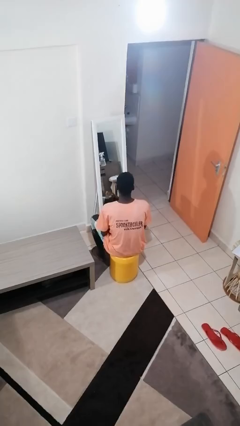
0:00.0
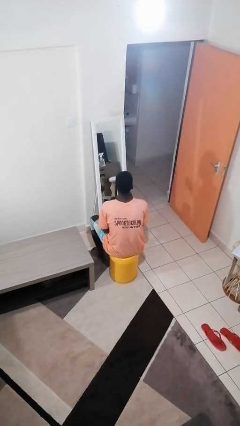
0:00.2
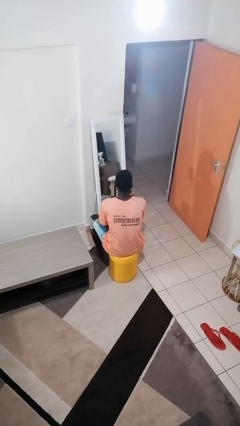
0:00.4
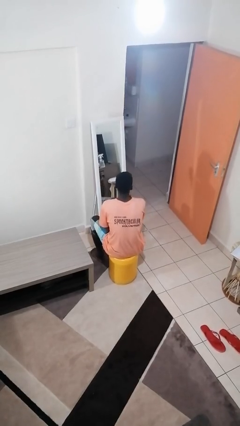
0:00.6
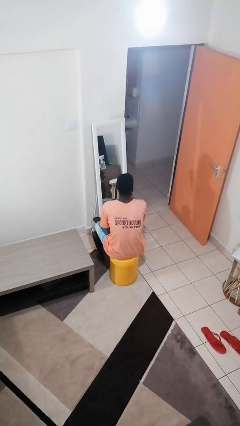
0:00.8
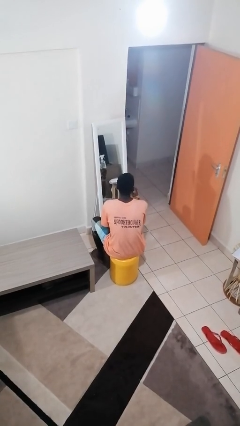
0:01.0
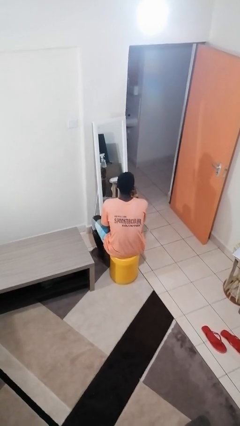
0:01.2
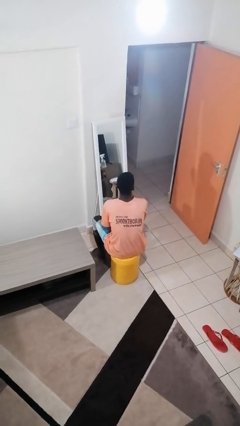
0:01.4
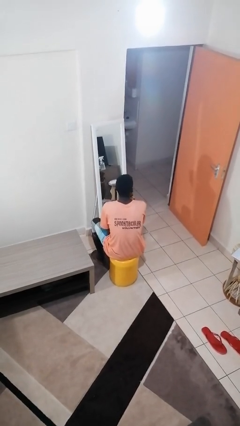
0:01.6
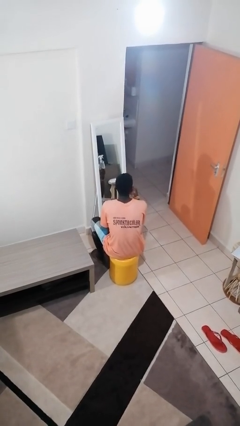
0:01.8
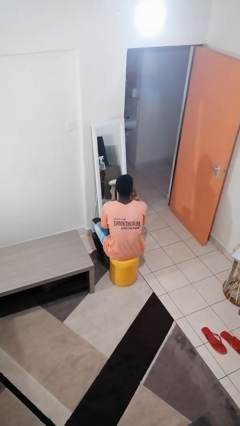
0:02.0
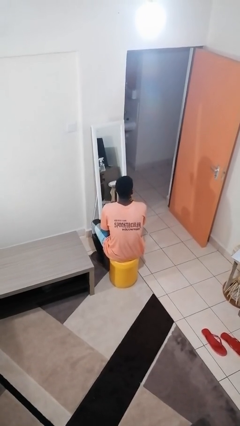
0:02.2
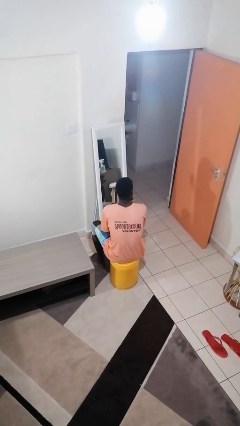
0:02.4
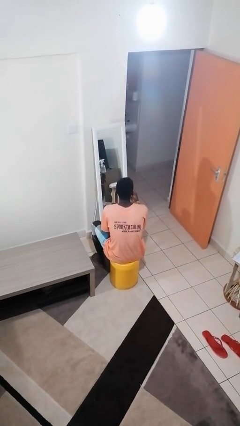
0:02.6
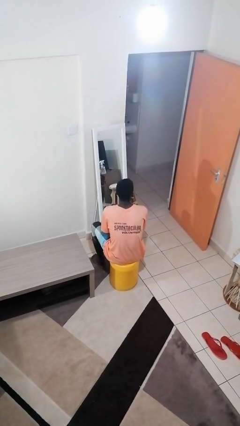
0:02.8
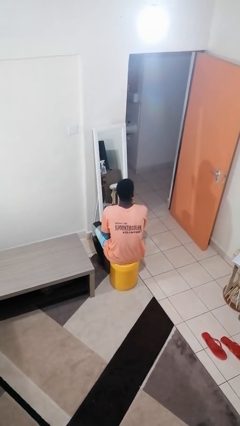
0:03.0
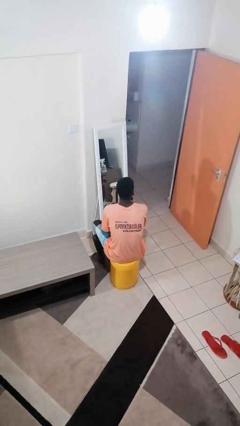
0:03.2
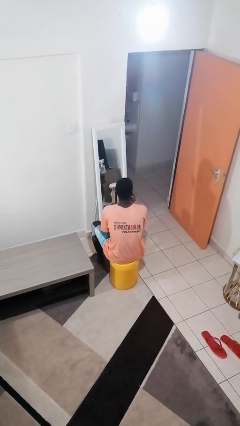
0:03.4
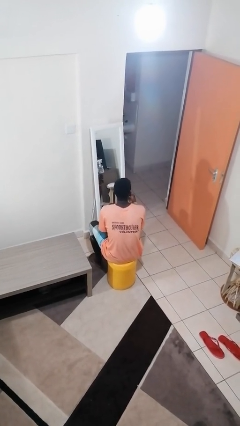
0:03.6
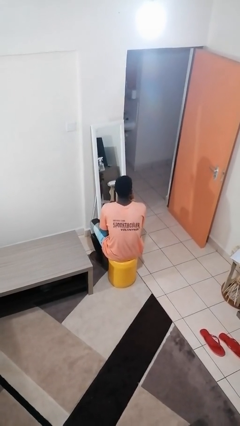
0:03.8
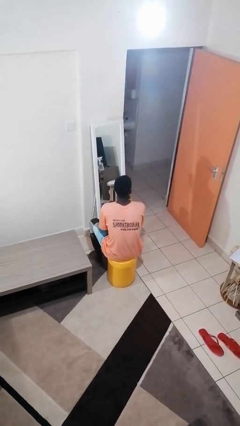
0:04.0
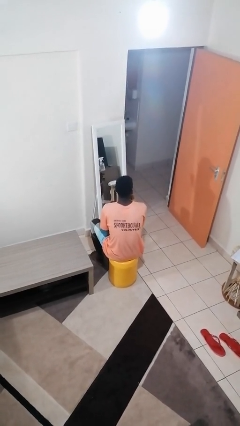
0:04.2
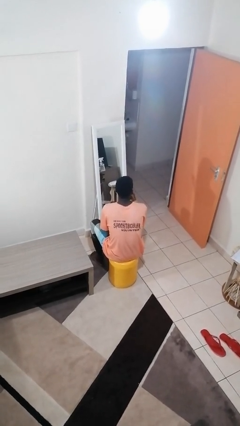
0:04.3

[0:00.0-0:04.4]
person applies lip makeup

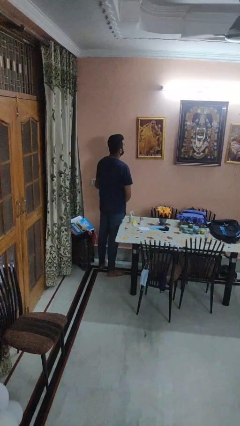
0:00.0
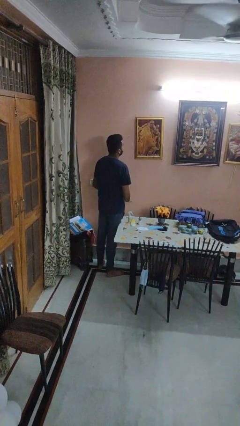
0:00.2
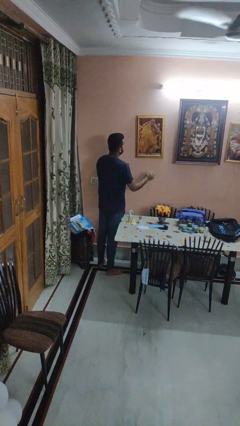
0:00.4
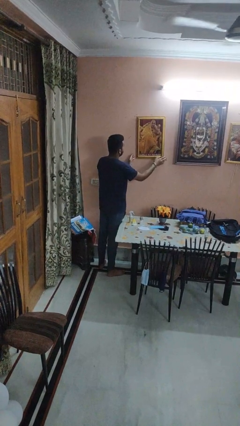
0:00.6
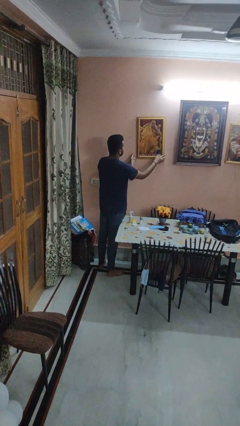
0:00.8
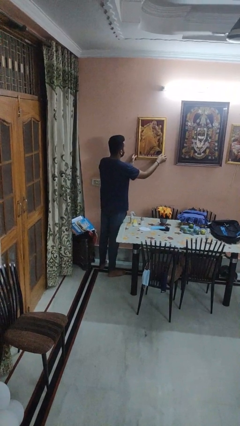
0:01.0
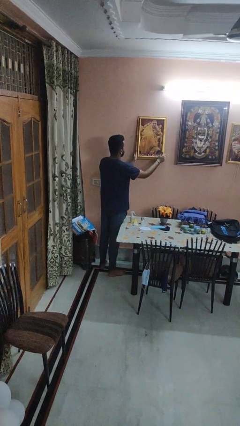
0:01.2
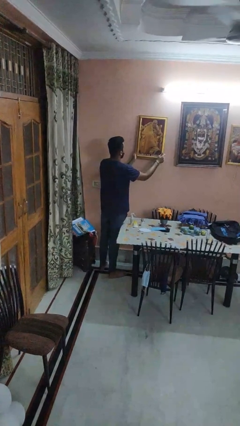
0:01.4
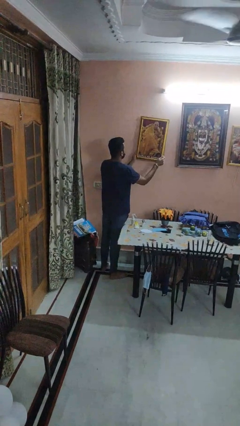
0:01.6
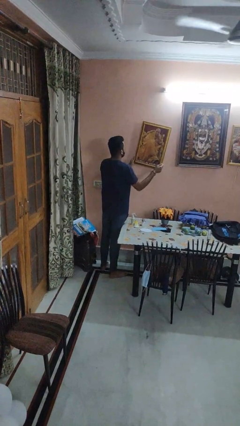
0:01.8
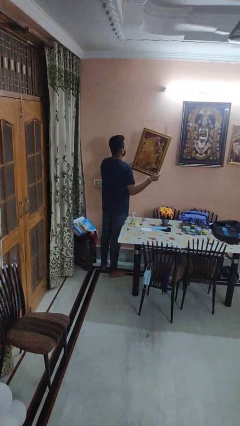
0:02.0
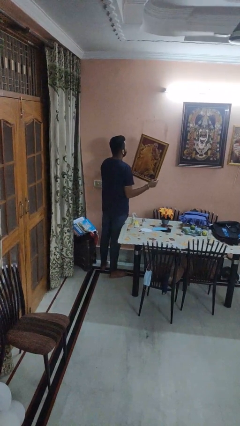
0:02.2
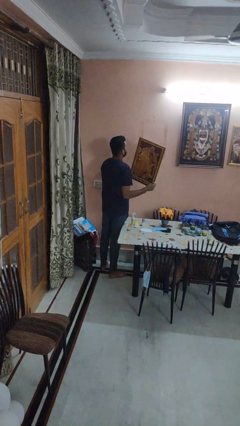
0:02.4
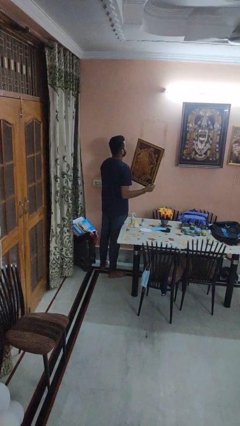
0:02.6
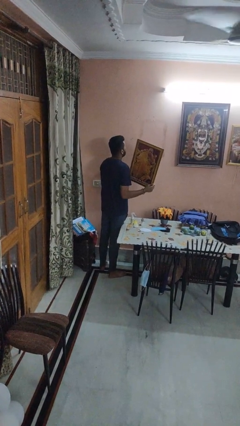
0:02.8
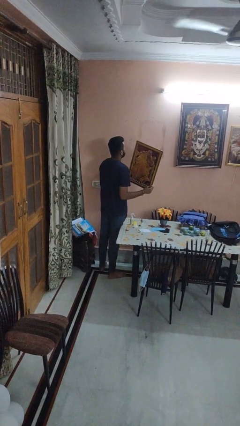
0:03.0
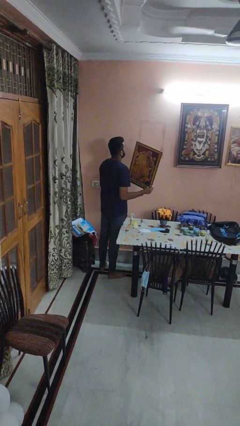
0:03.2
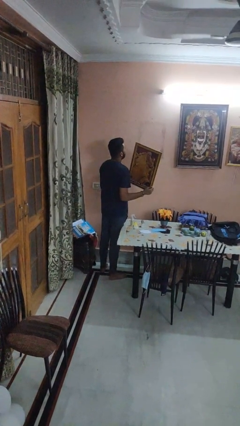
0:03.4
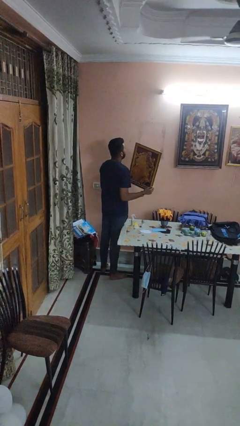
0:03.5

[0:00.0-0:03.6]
person takes down picture frame

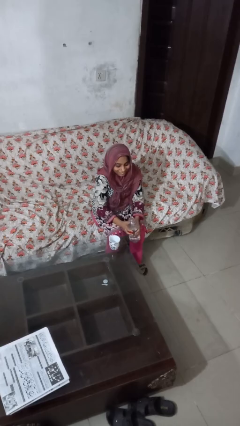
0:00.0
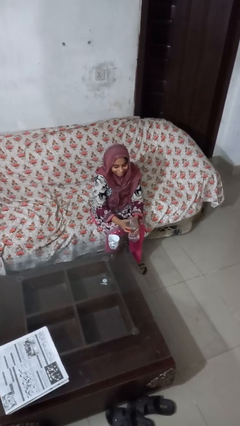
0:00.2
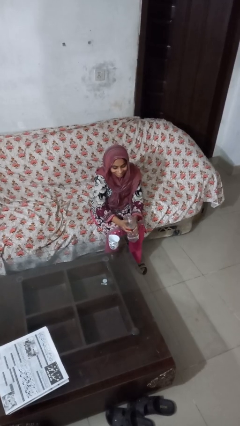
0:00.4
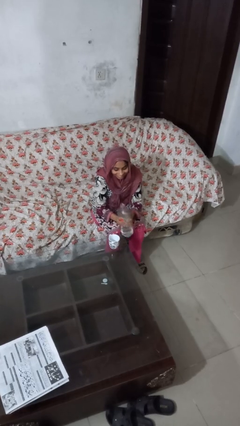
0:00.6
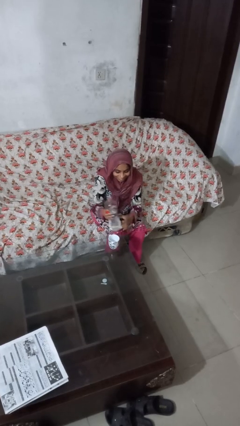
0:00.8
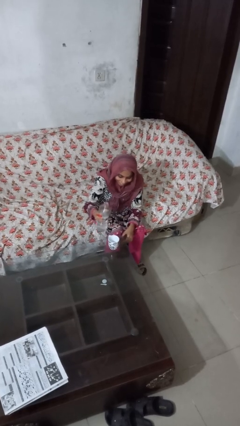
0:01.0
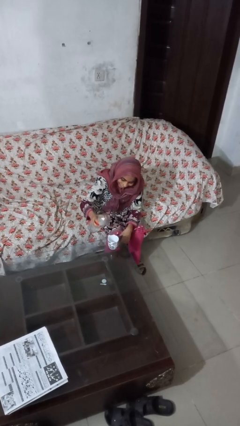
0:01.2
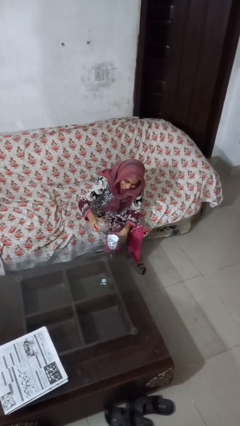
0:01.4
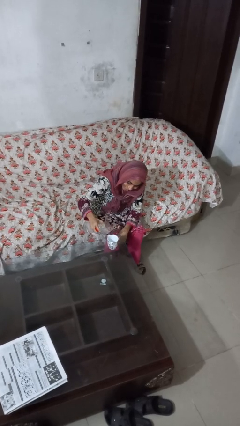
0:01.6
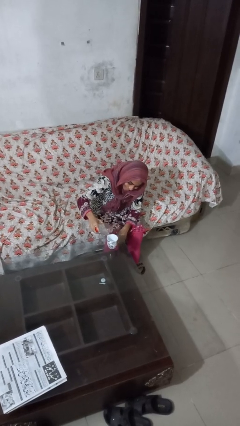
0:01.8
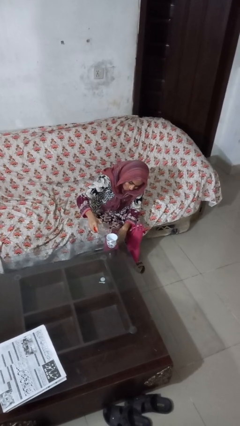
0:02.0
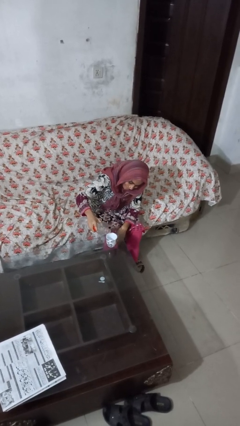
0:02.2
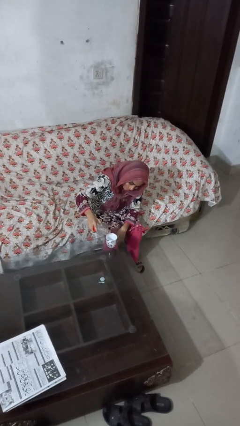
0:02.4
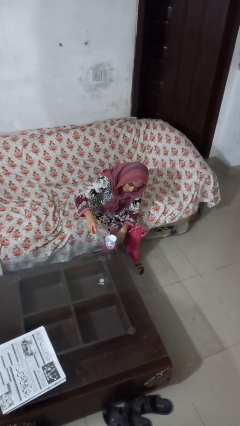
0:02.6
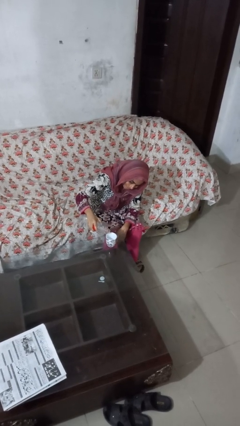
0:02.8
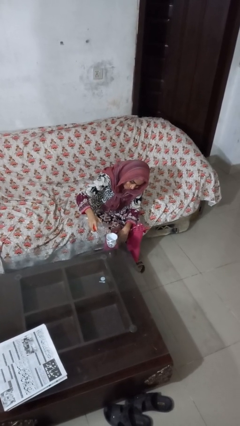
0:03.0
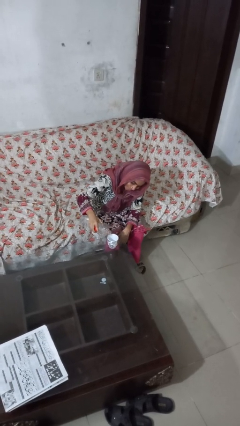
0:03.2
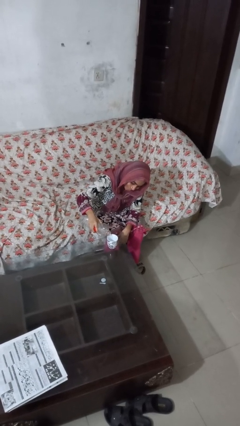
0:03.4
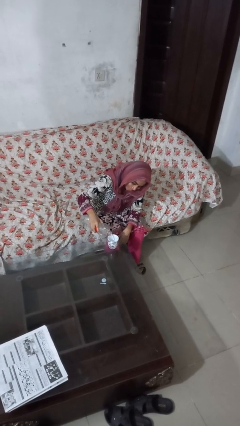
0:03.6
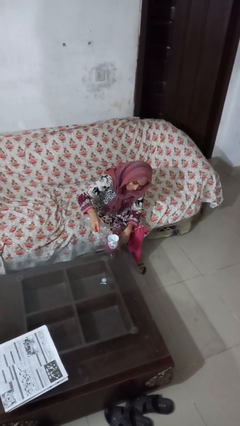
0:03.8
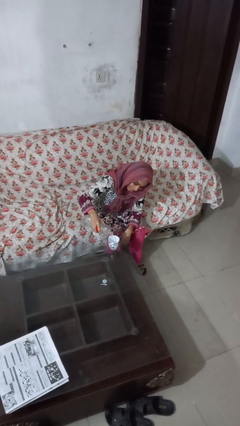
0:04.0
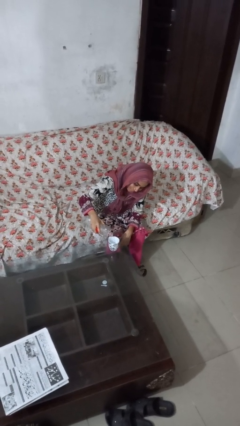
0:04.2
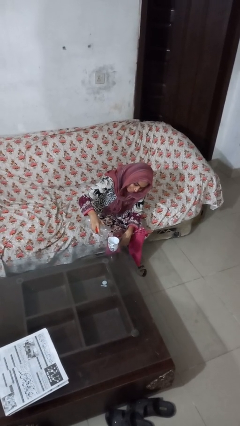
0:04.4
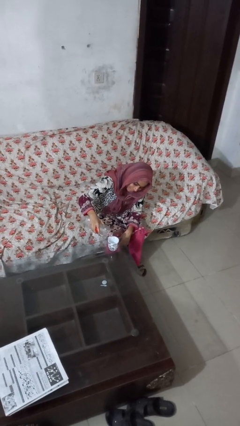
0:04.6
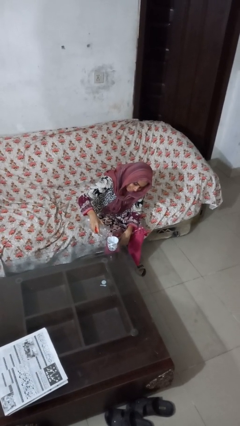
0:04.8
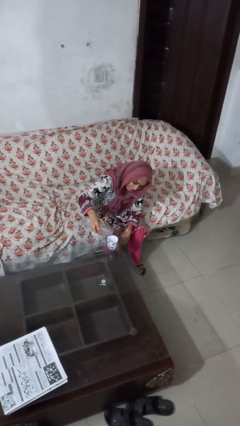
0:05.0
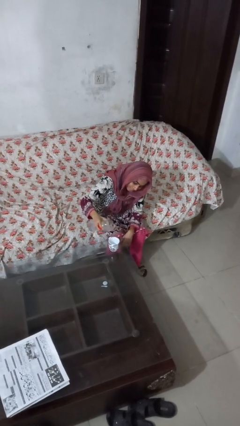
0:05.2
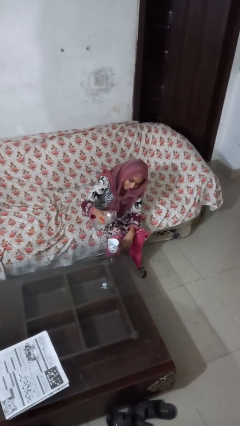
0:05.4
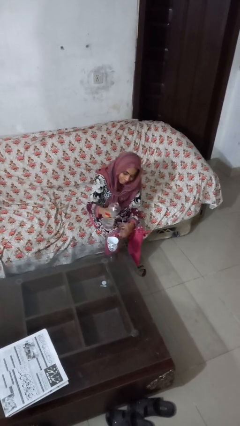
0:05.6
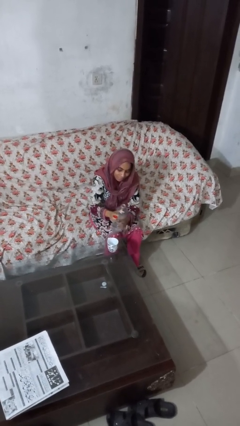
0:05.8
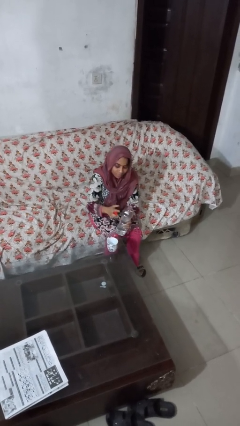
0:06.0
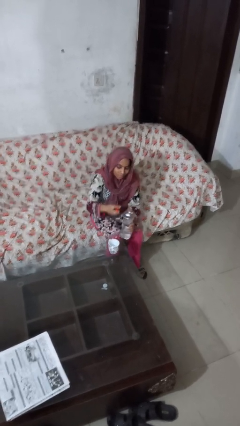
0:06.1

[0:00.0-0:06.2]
person pours liquid into cup

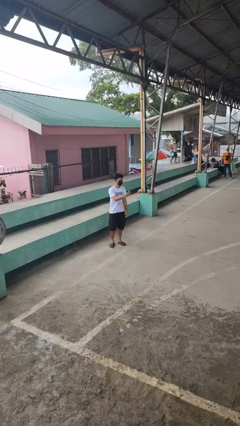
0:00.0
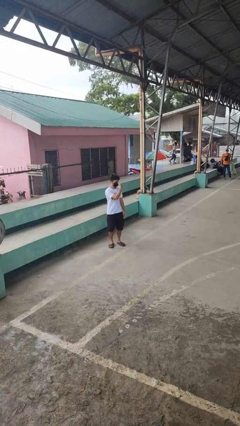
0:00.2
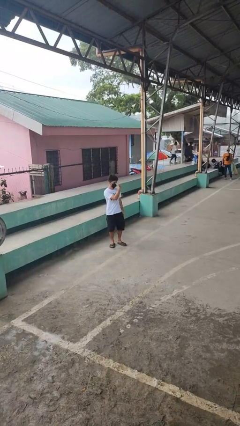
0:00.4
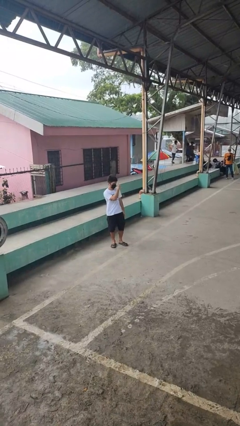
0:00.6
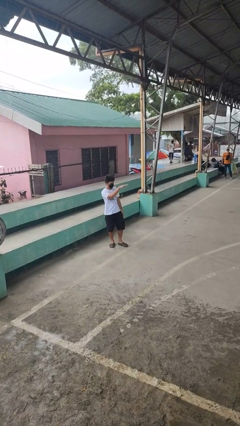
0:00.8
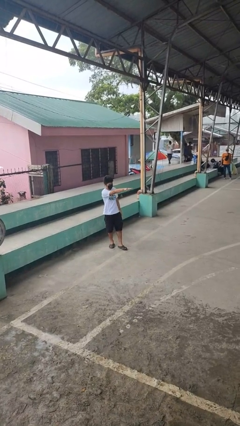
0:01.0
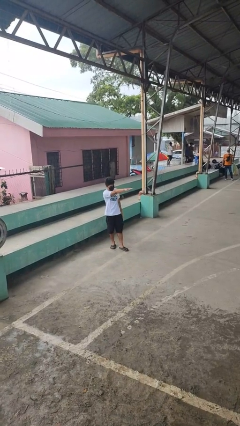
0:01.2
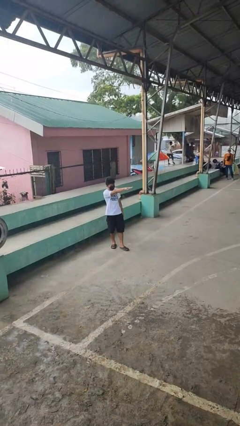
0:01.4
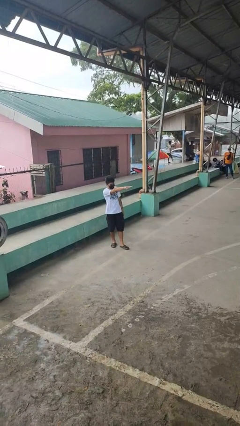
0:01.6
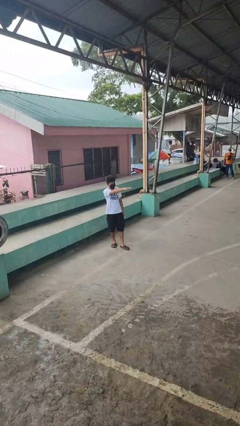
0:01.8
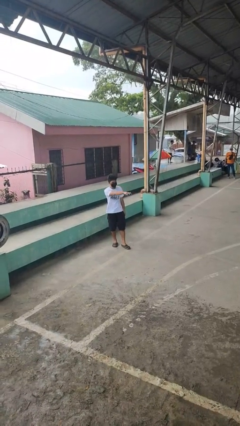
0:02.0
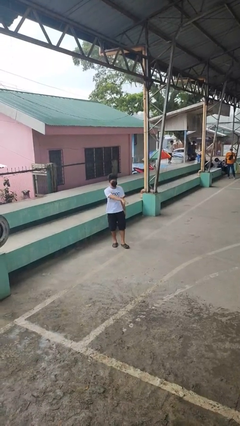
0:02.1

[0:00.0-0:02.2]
person gestures watch closely

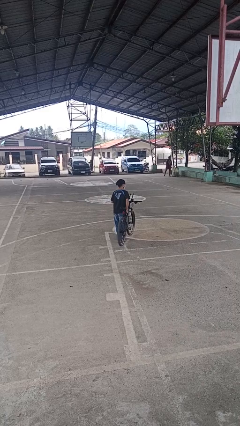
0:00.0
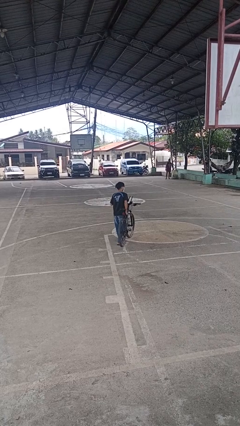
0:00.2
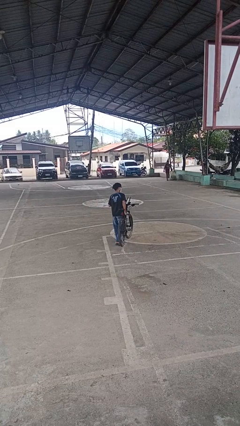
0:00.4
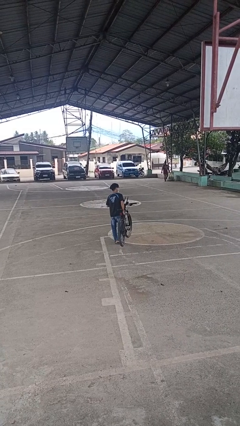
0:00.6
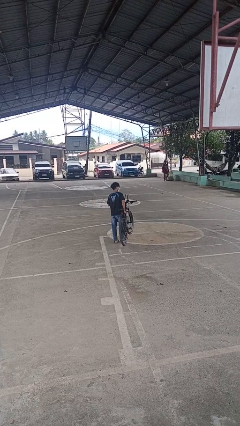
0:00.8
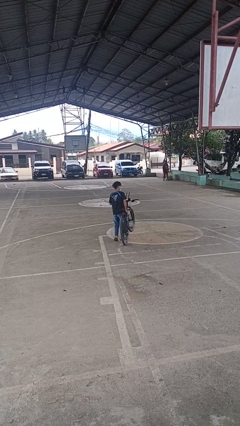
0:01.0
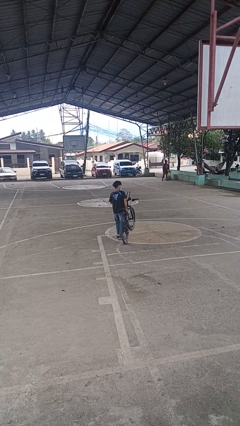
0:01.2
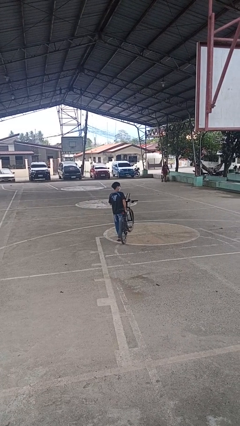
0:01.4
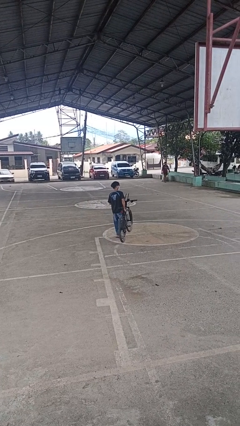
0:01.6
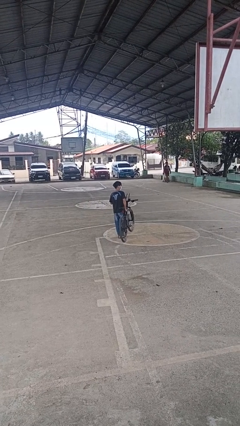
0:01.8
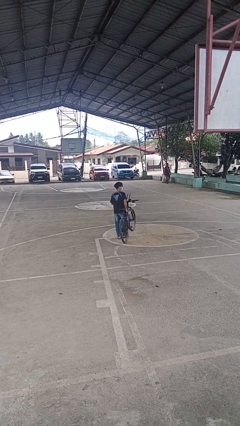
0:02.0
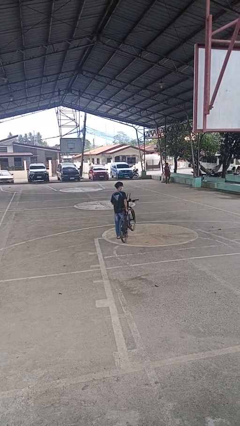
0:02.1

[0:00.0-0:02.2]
person carries bicycle
